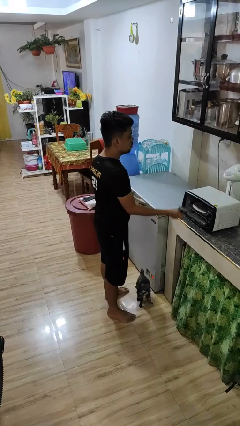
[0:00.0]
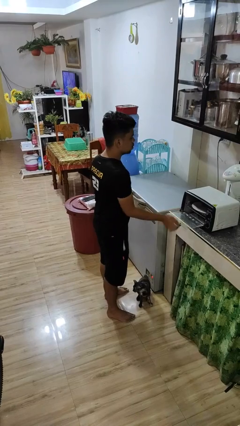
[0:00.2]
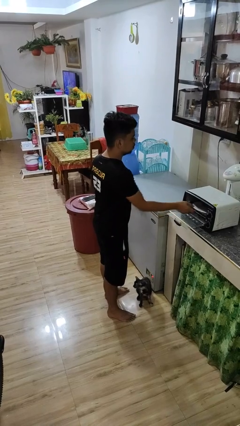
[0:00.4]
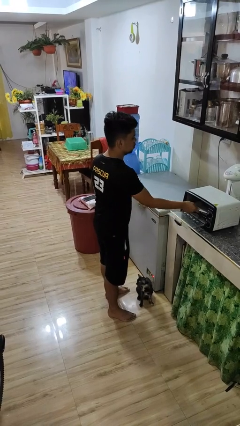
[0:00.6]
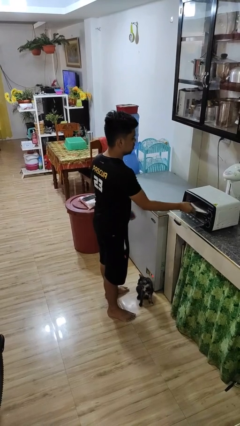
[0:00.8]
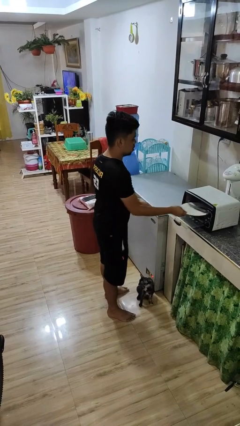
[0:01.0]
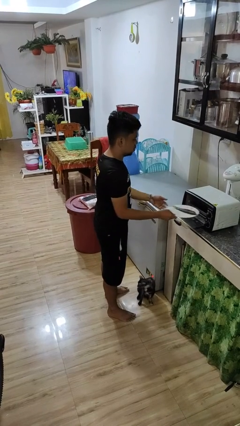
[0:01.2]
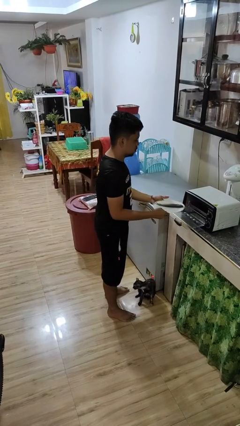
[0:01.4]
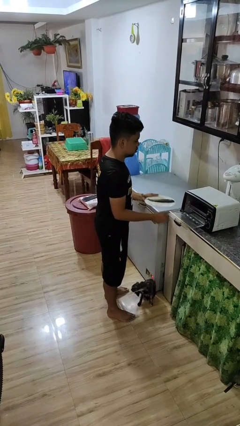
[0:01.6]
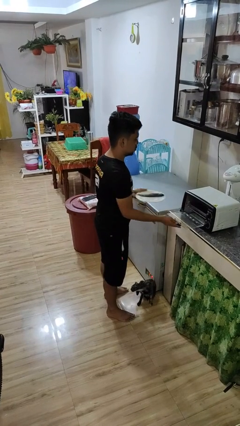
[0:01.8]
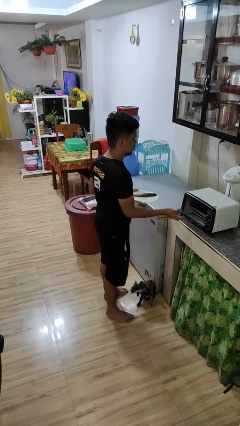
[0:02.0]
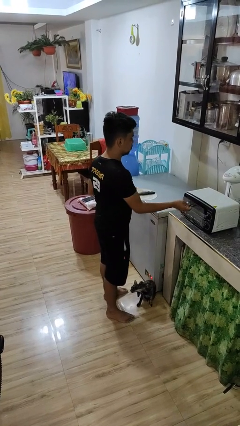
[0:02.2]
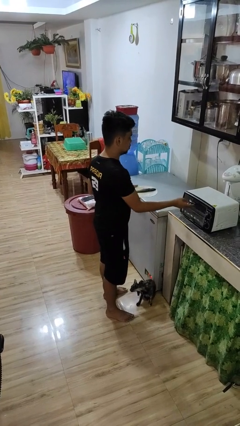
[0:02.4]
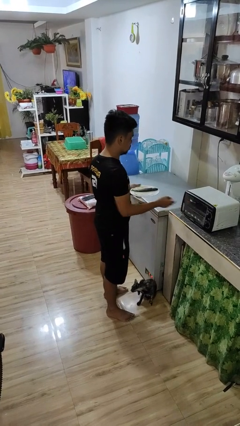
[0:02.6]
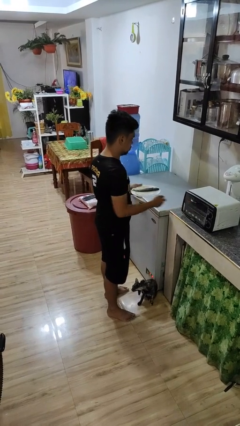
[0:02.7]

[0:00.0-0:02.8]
person takes object from microwave

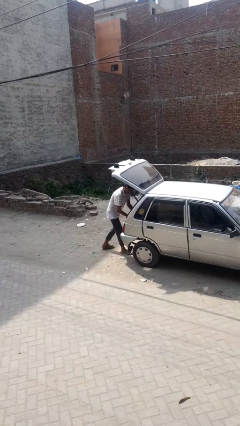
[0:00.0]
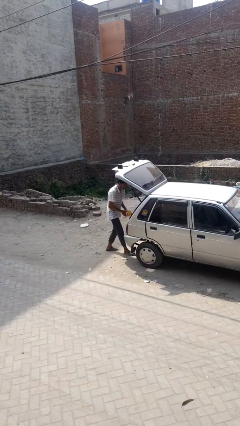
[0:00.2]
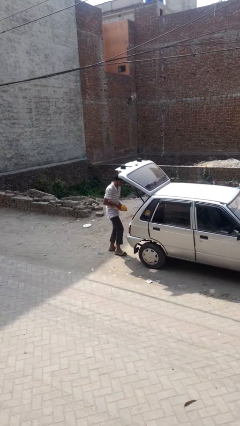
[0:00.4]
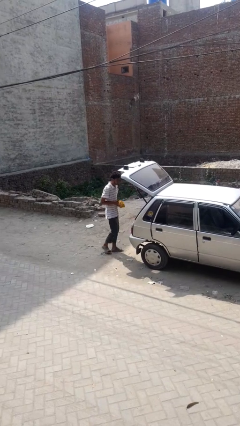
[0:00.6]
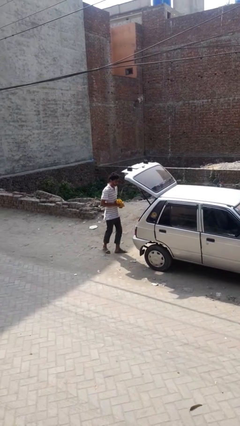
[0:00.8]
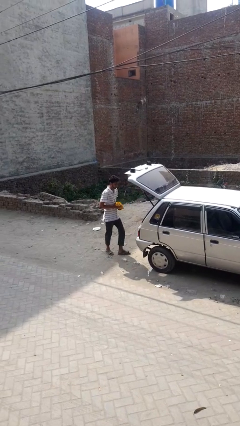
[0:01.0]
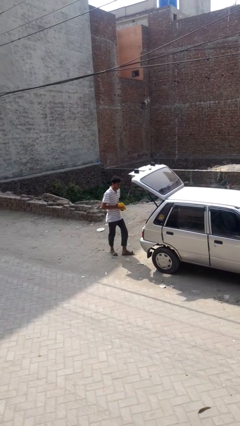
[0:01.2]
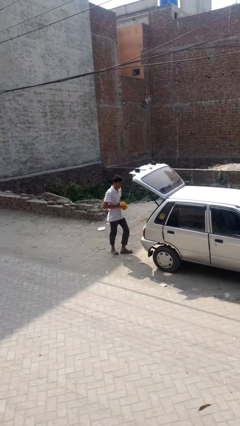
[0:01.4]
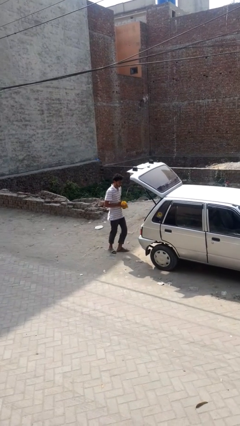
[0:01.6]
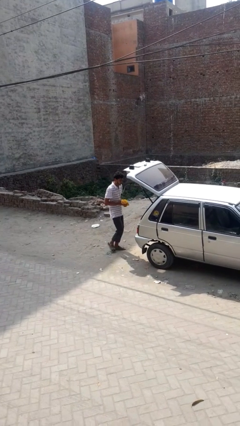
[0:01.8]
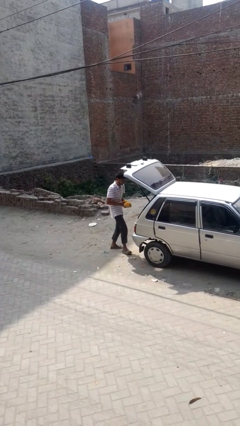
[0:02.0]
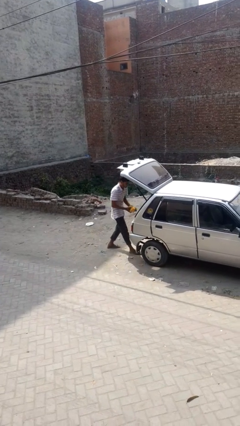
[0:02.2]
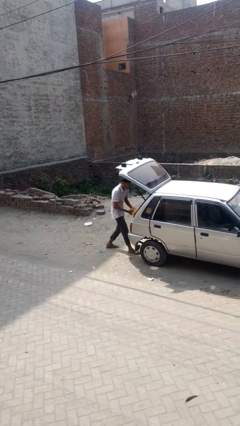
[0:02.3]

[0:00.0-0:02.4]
person unloads car

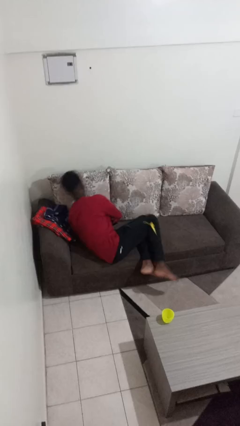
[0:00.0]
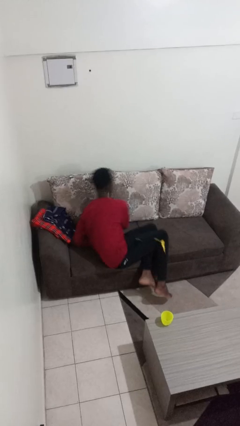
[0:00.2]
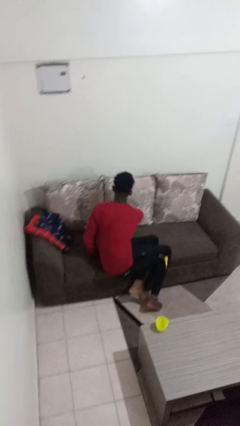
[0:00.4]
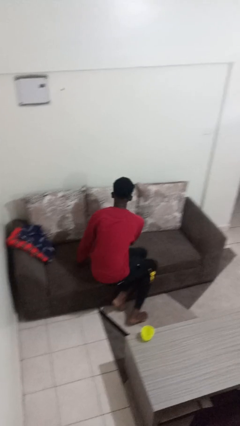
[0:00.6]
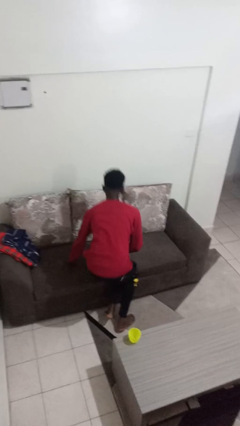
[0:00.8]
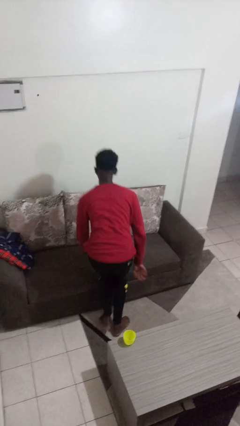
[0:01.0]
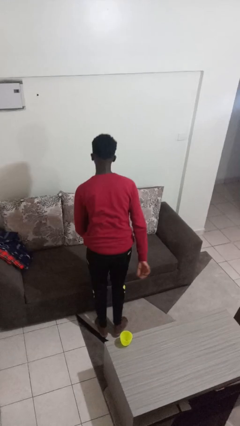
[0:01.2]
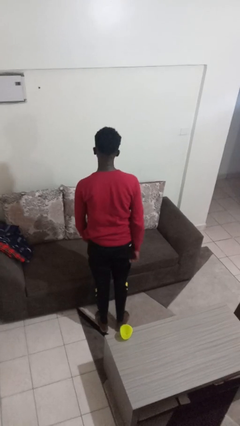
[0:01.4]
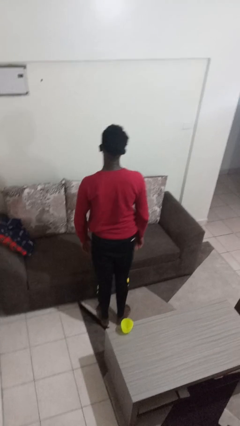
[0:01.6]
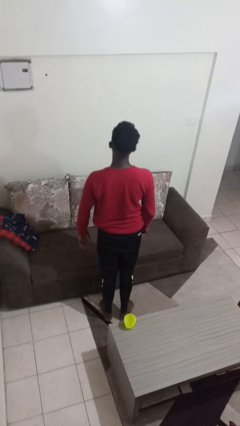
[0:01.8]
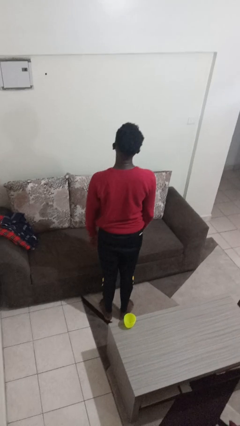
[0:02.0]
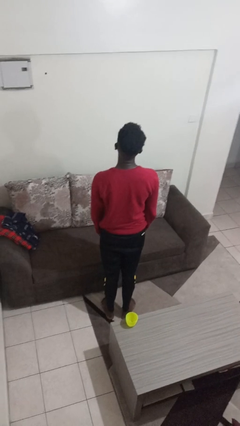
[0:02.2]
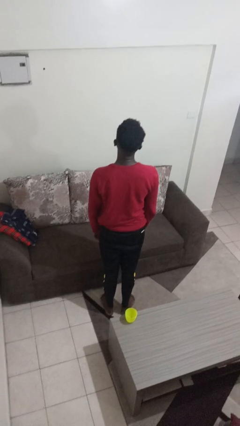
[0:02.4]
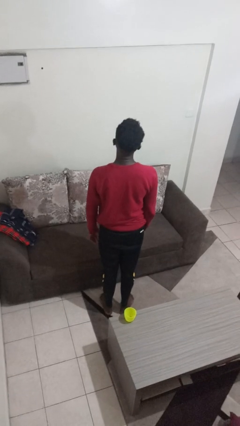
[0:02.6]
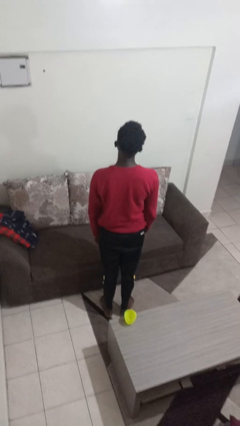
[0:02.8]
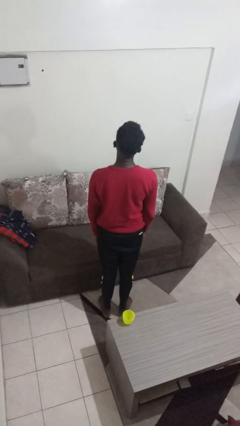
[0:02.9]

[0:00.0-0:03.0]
person stands up

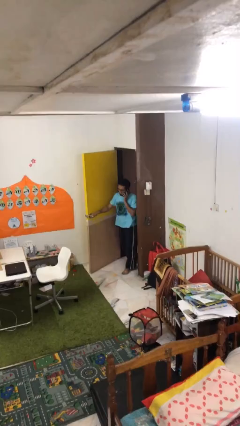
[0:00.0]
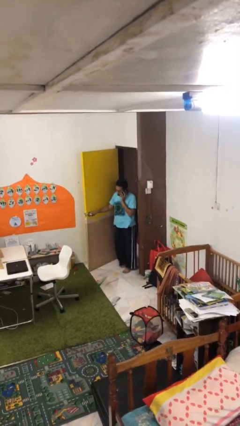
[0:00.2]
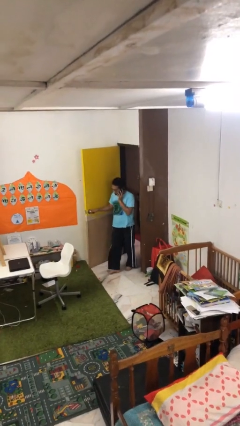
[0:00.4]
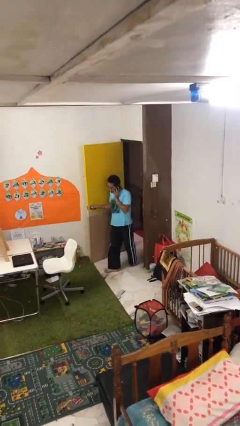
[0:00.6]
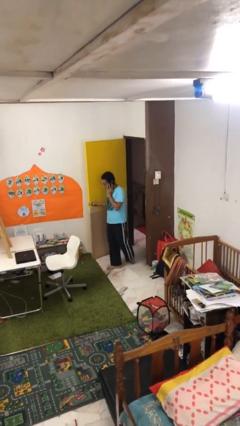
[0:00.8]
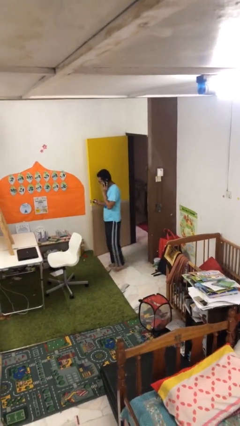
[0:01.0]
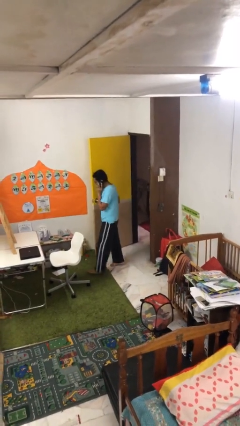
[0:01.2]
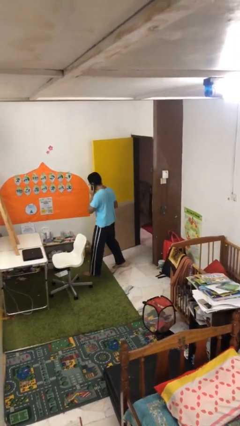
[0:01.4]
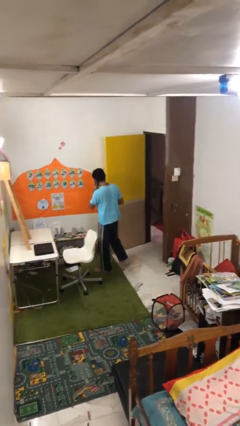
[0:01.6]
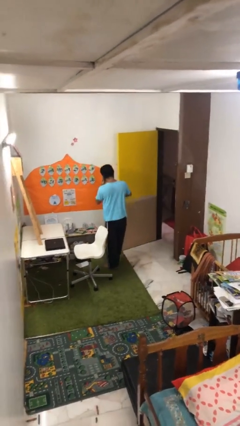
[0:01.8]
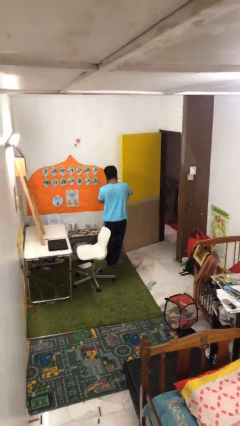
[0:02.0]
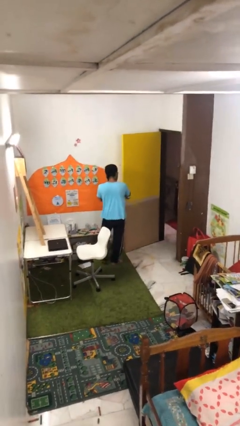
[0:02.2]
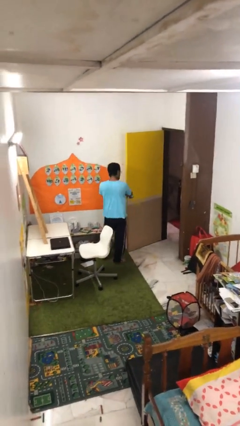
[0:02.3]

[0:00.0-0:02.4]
person enters scene through structure

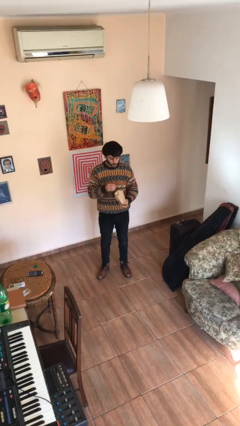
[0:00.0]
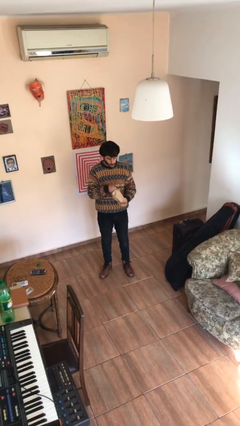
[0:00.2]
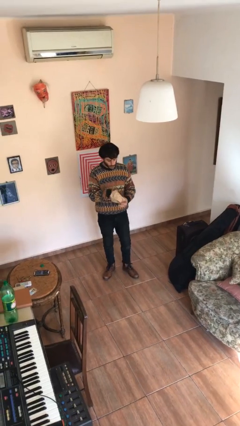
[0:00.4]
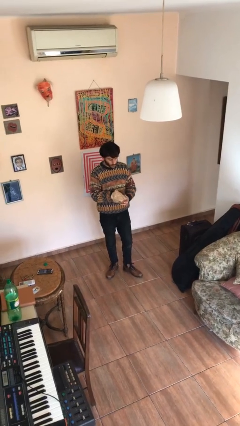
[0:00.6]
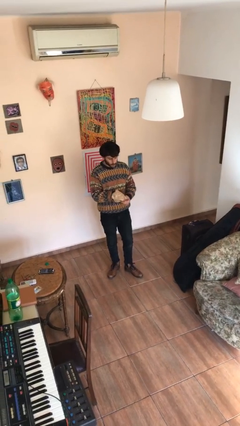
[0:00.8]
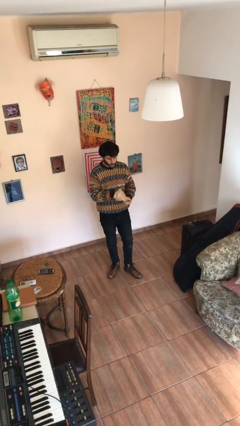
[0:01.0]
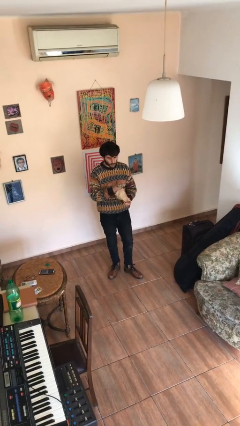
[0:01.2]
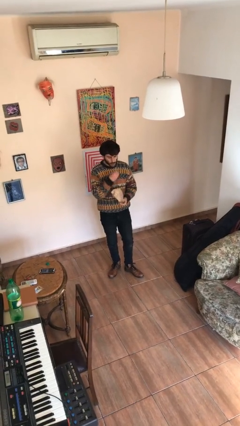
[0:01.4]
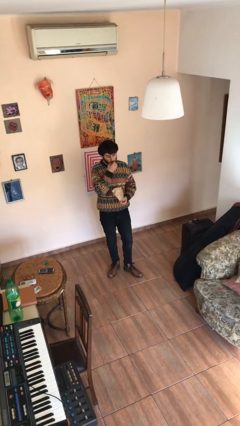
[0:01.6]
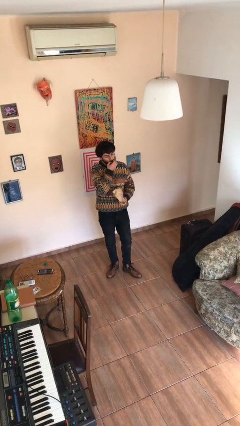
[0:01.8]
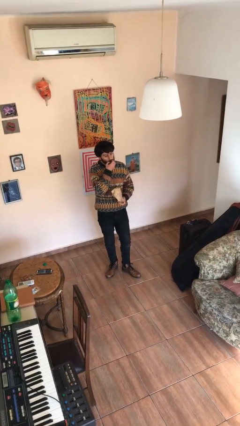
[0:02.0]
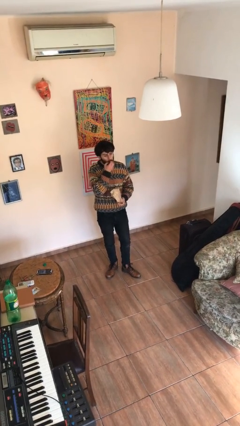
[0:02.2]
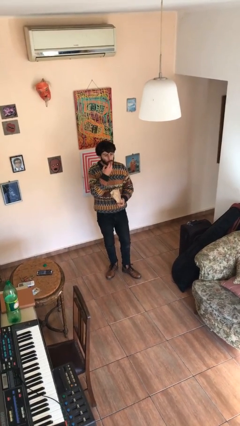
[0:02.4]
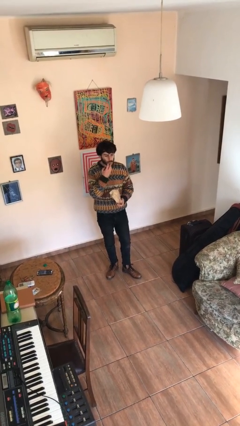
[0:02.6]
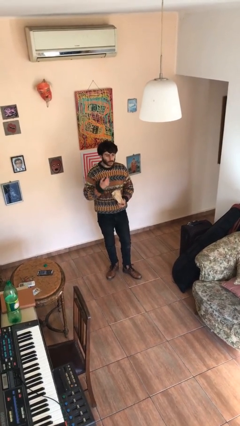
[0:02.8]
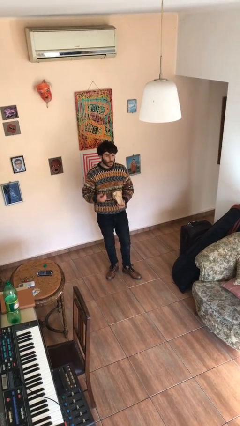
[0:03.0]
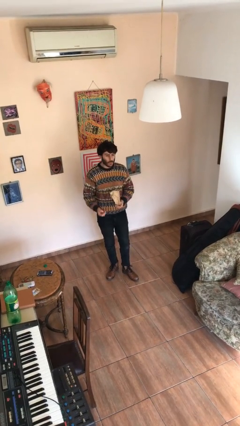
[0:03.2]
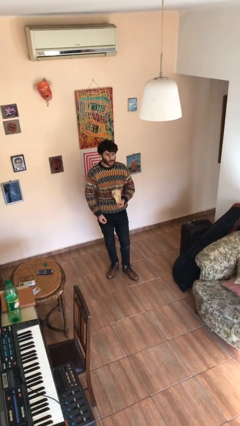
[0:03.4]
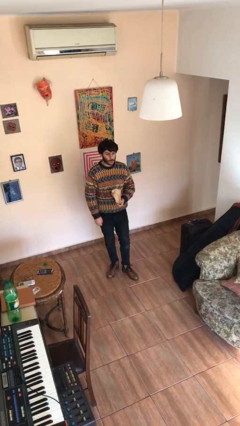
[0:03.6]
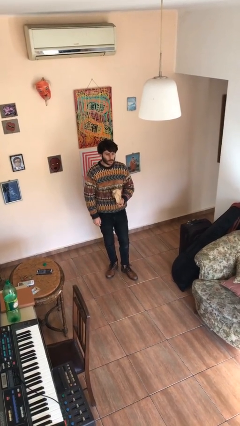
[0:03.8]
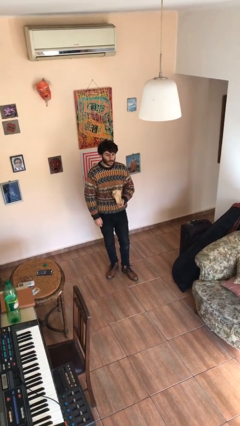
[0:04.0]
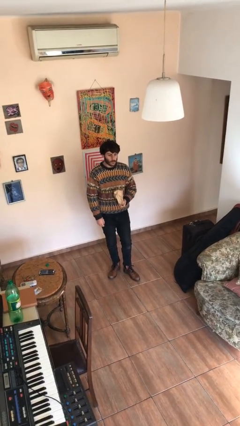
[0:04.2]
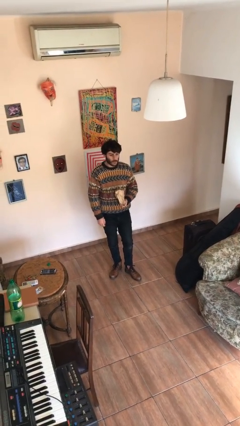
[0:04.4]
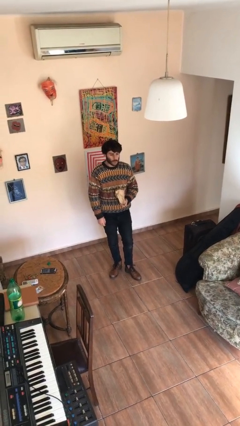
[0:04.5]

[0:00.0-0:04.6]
person eats snack from bag

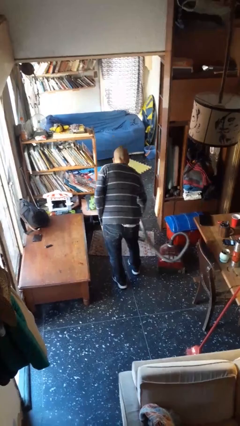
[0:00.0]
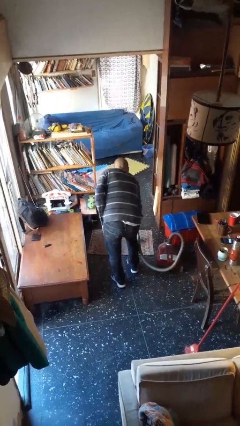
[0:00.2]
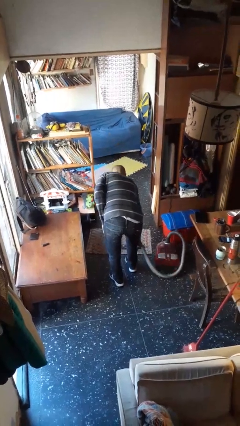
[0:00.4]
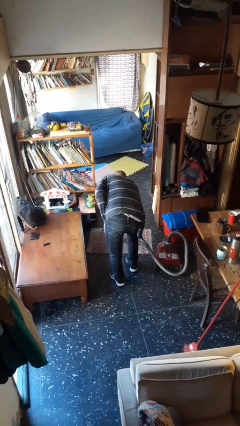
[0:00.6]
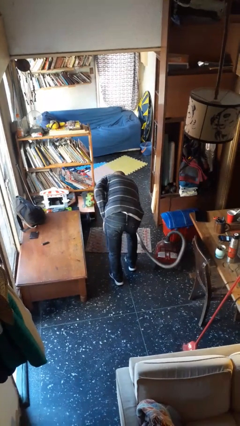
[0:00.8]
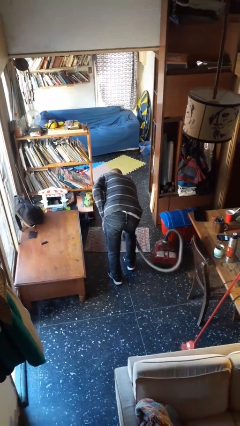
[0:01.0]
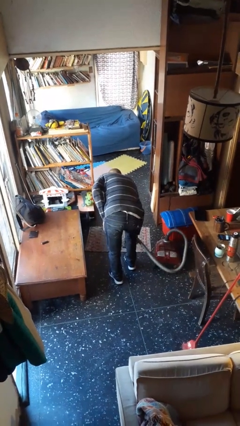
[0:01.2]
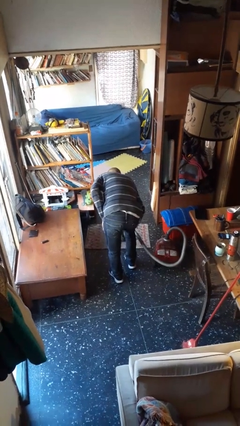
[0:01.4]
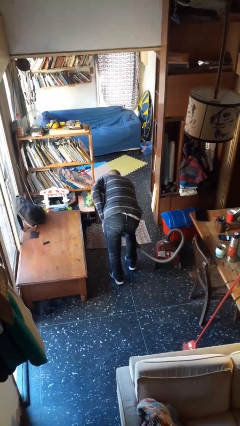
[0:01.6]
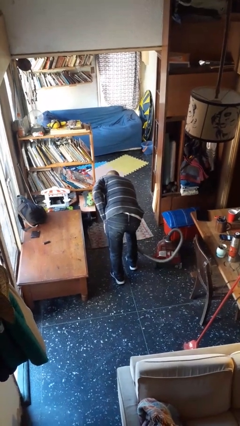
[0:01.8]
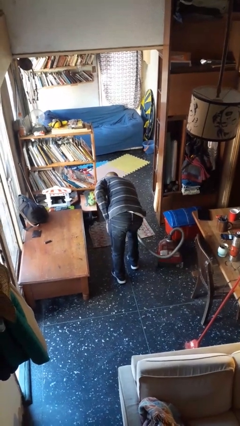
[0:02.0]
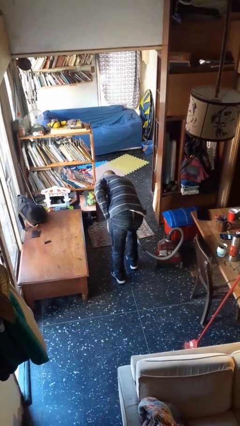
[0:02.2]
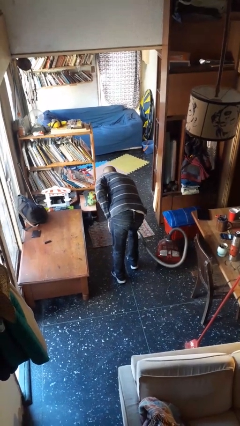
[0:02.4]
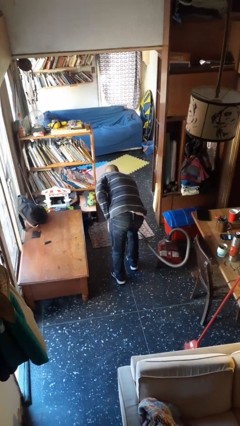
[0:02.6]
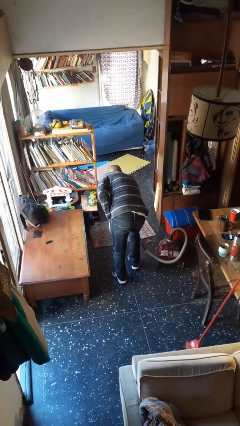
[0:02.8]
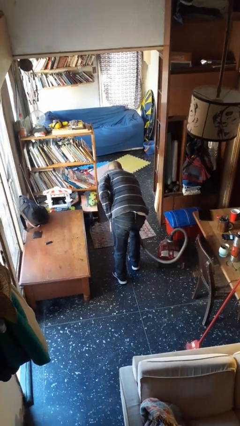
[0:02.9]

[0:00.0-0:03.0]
person vacuums carpet
